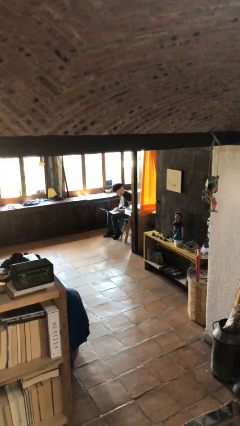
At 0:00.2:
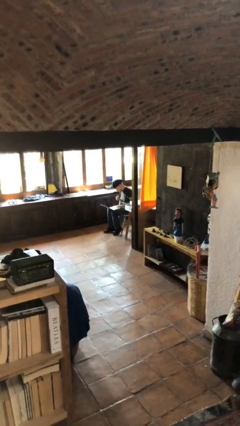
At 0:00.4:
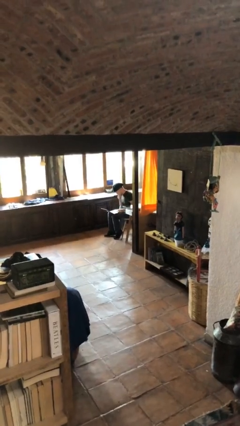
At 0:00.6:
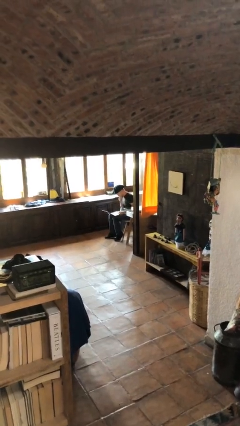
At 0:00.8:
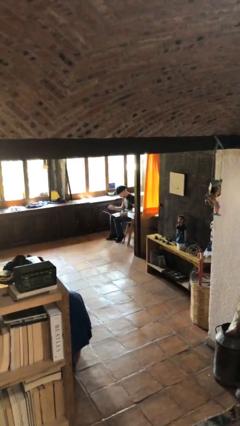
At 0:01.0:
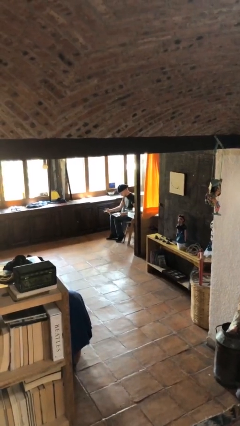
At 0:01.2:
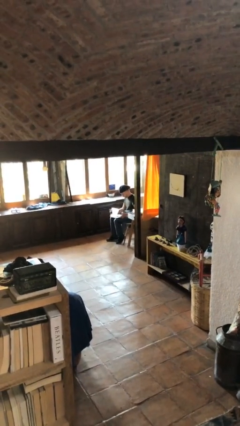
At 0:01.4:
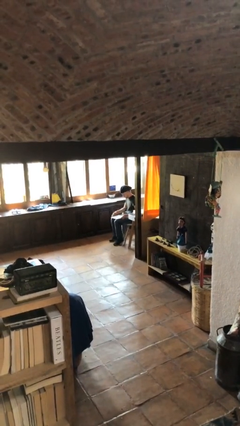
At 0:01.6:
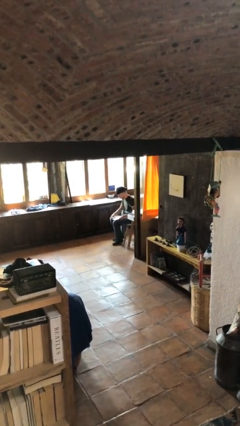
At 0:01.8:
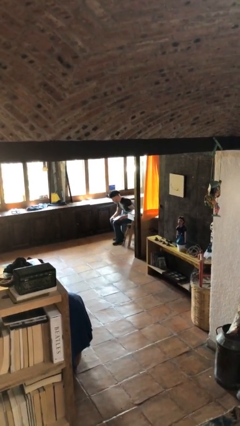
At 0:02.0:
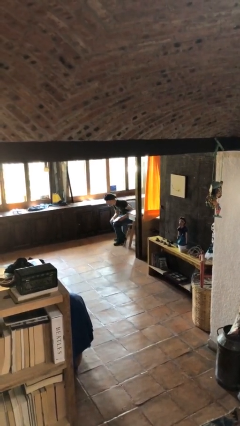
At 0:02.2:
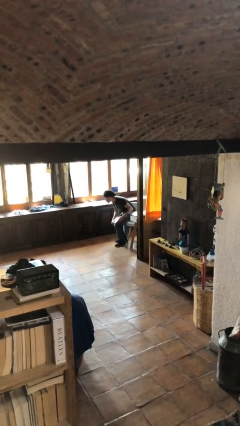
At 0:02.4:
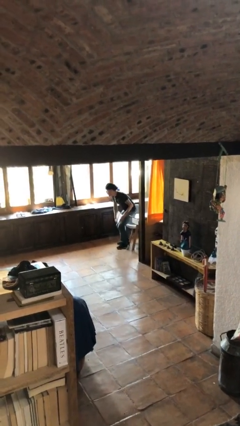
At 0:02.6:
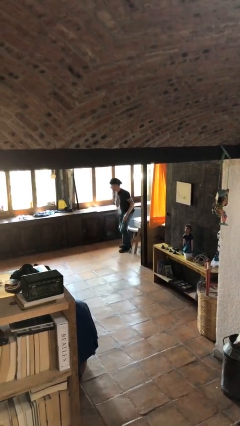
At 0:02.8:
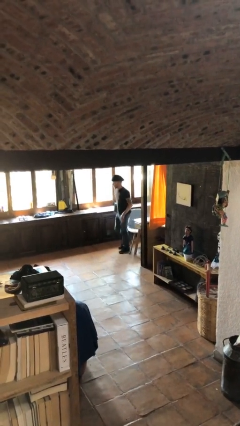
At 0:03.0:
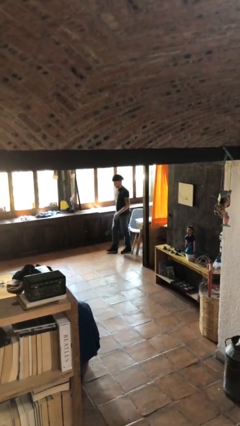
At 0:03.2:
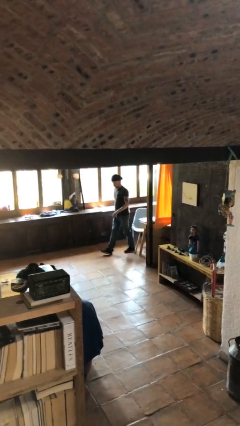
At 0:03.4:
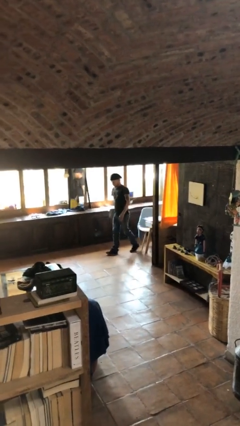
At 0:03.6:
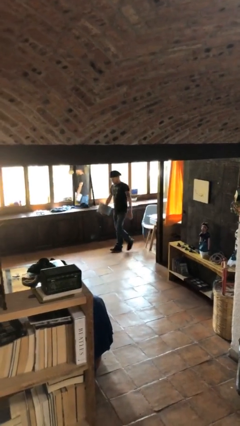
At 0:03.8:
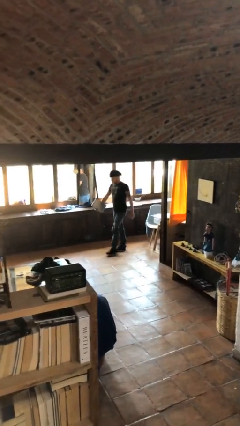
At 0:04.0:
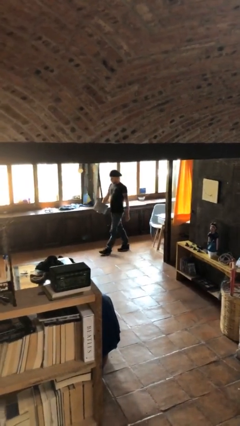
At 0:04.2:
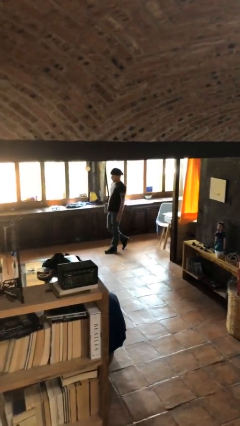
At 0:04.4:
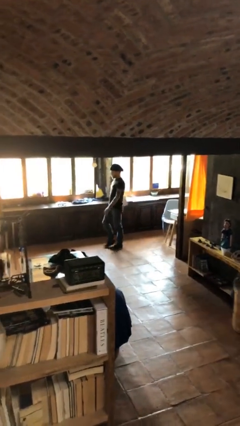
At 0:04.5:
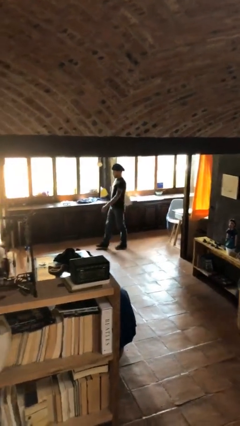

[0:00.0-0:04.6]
person stands up

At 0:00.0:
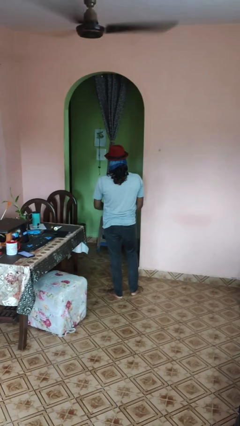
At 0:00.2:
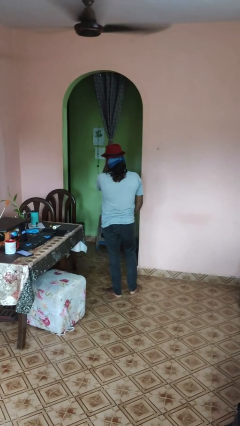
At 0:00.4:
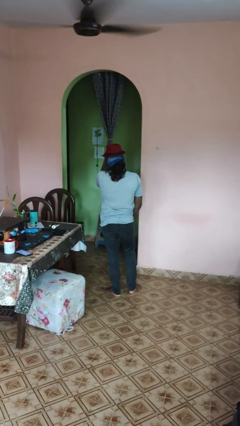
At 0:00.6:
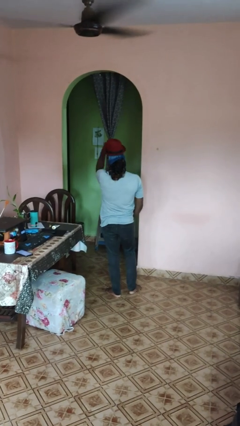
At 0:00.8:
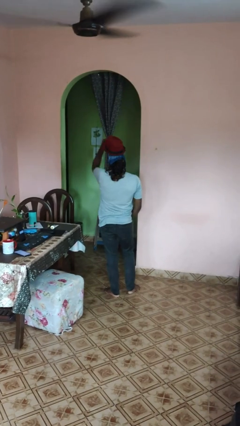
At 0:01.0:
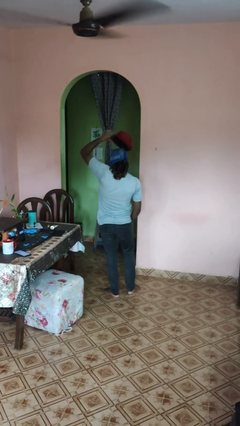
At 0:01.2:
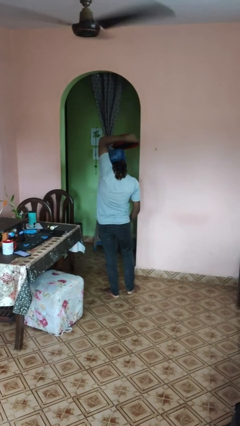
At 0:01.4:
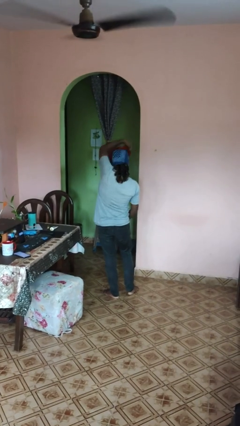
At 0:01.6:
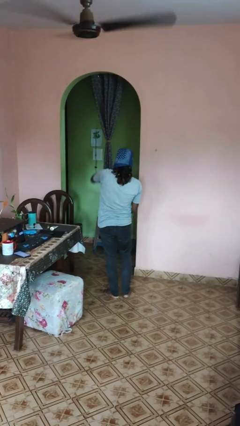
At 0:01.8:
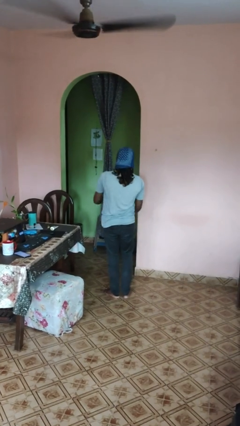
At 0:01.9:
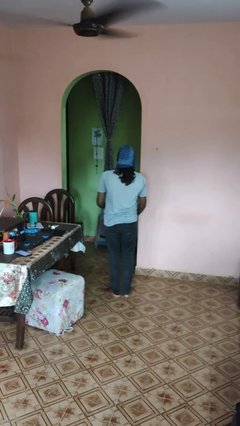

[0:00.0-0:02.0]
person takes off hat

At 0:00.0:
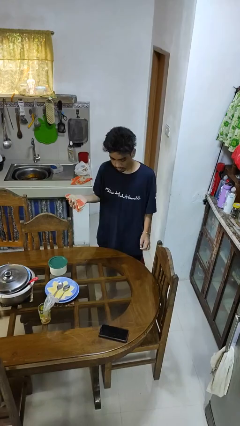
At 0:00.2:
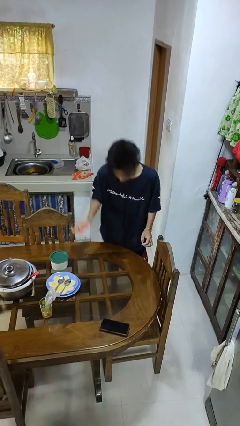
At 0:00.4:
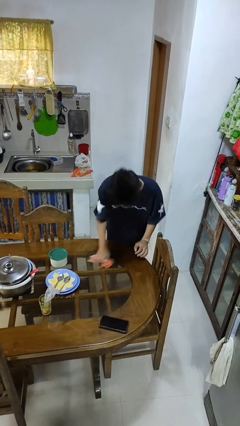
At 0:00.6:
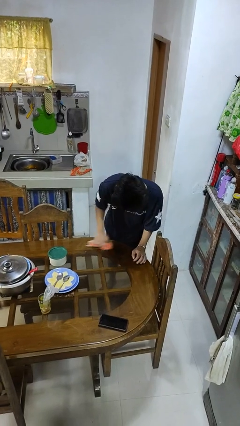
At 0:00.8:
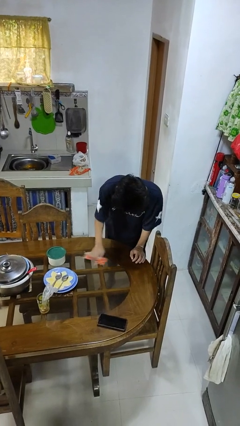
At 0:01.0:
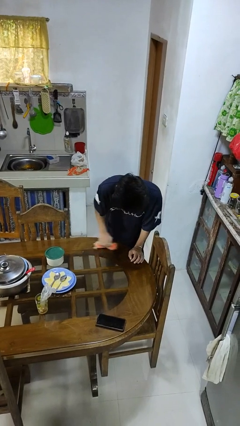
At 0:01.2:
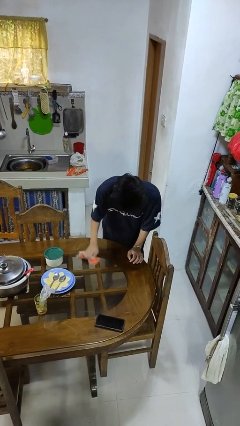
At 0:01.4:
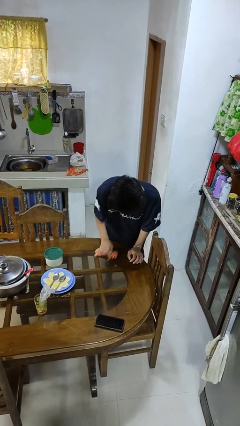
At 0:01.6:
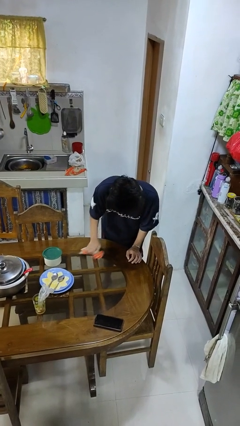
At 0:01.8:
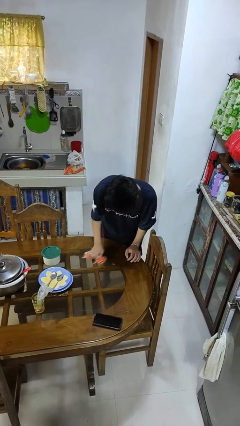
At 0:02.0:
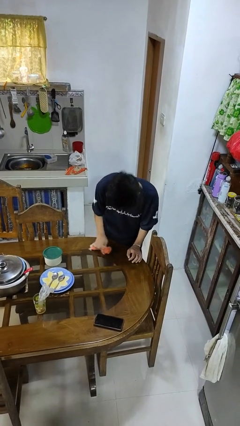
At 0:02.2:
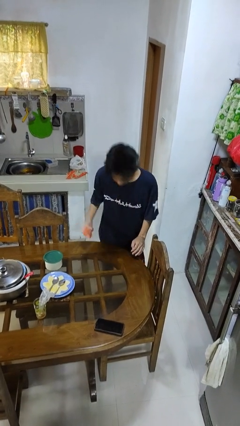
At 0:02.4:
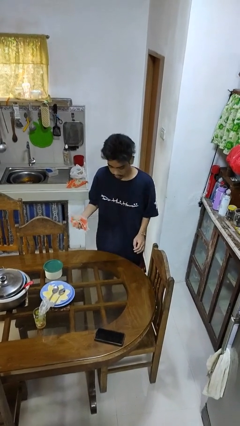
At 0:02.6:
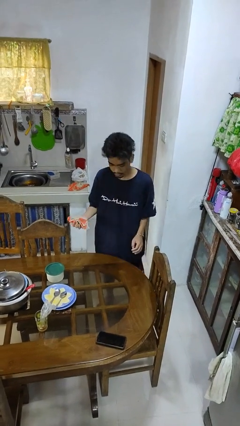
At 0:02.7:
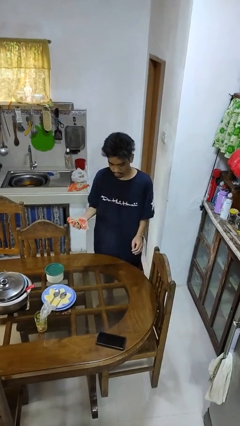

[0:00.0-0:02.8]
person cleans table with rag

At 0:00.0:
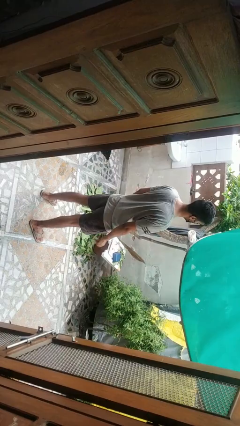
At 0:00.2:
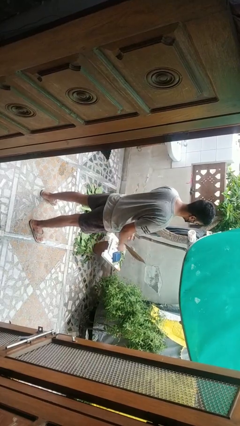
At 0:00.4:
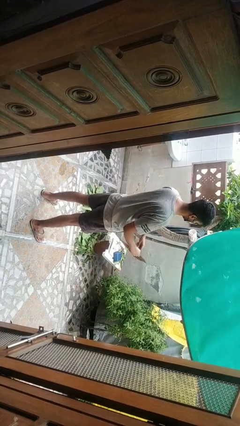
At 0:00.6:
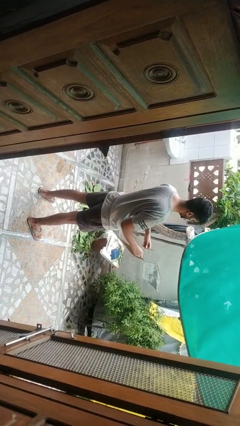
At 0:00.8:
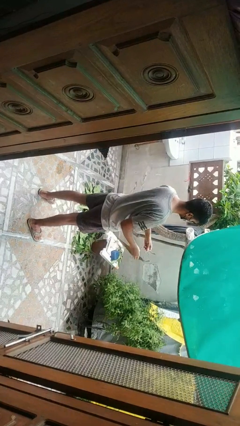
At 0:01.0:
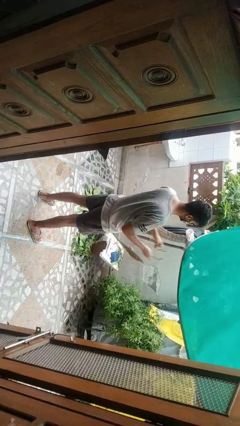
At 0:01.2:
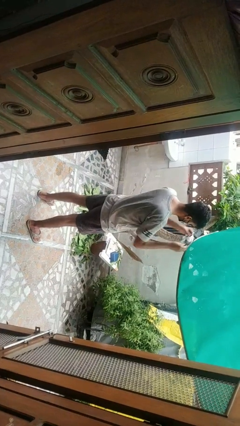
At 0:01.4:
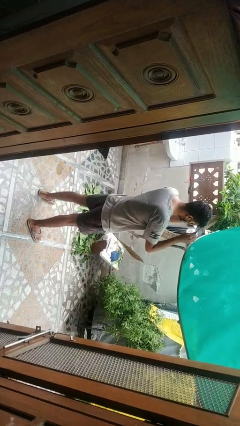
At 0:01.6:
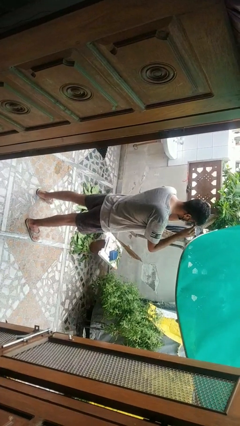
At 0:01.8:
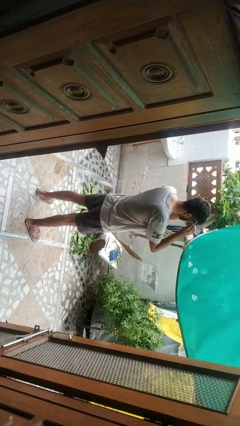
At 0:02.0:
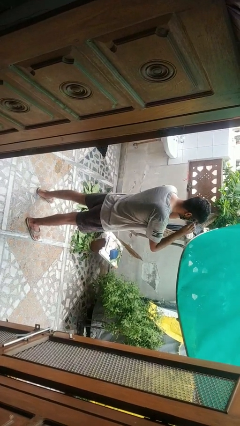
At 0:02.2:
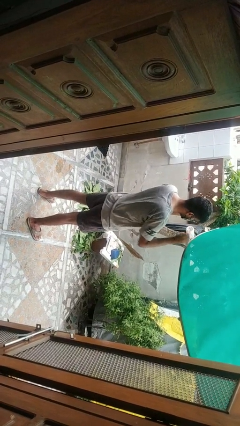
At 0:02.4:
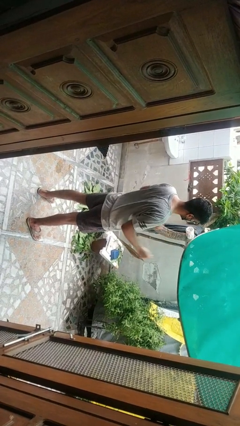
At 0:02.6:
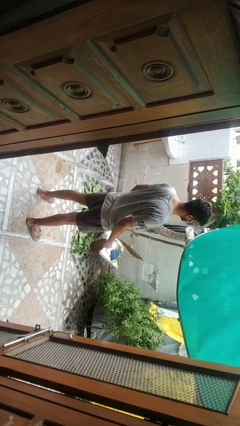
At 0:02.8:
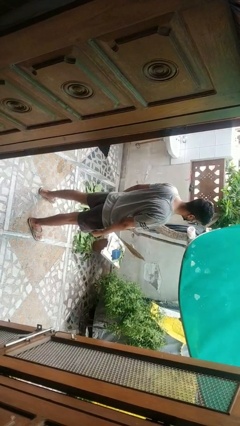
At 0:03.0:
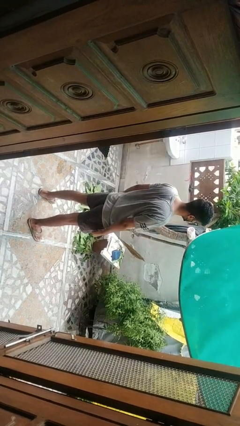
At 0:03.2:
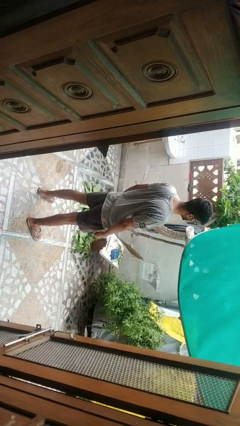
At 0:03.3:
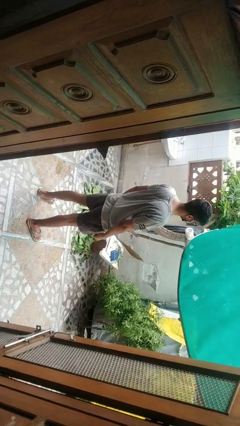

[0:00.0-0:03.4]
person puts on glasses

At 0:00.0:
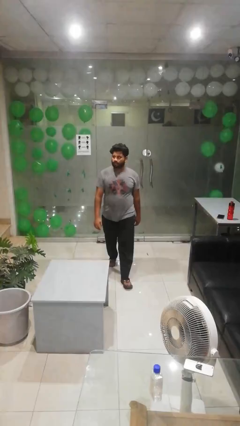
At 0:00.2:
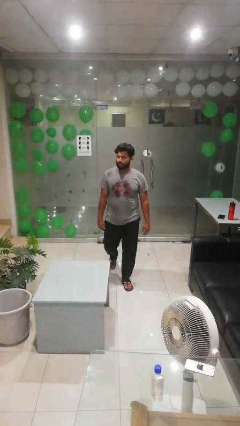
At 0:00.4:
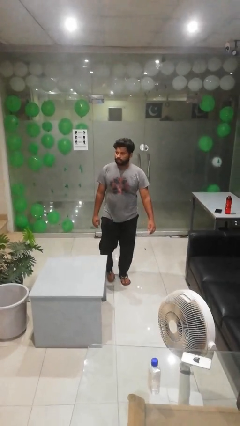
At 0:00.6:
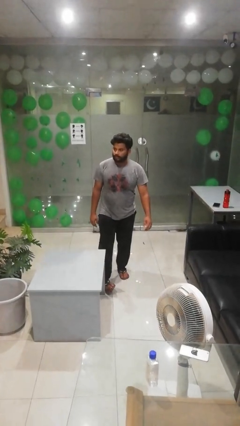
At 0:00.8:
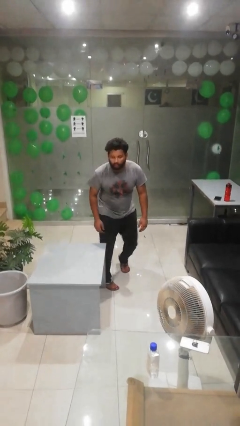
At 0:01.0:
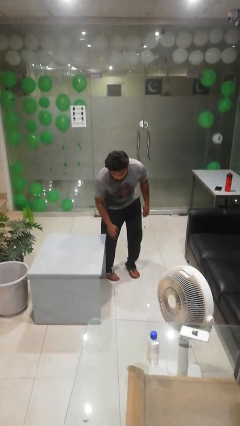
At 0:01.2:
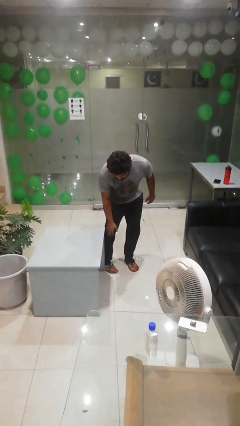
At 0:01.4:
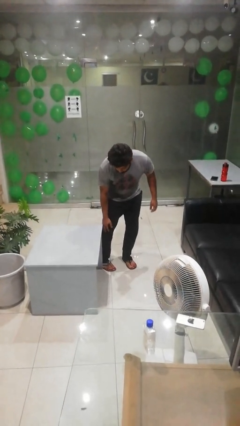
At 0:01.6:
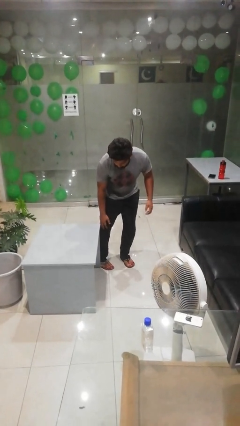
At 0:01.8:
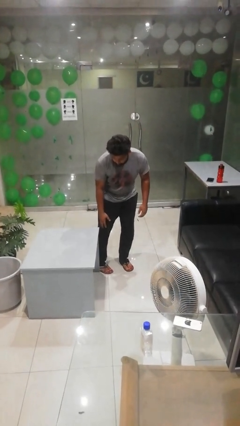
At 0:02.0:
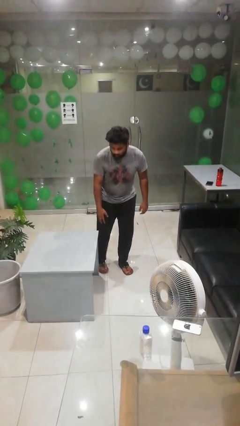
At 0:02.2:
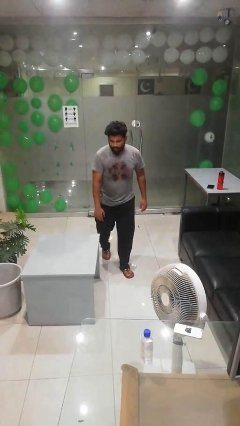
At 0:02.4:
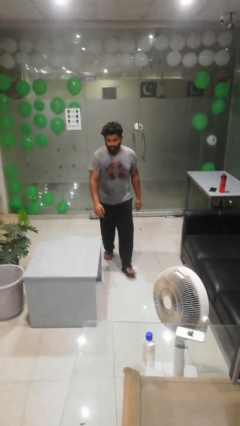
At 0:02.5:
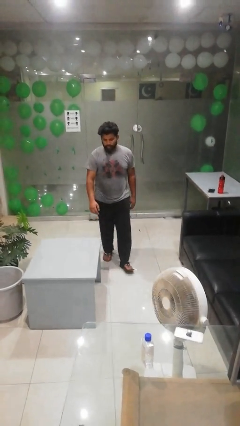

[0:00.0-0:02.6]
person bumps into table

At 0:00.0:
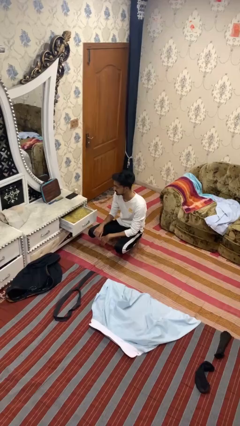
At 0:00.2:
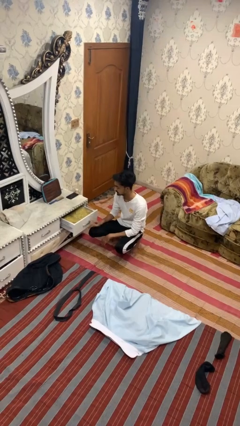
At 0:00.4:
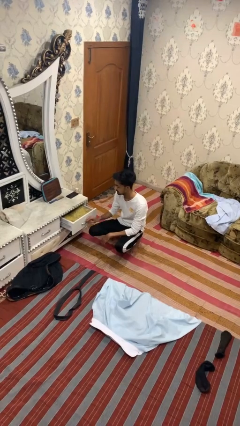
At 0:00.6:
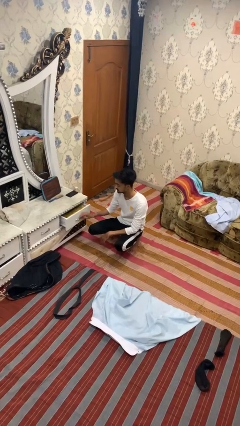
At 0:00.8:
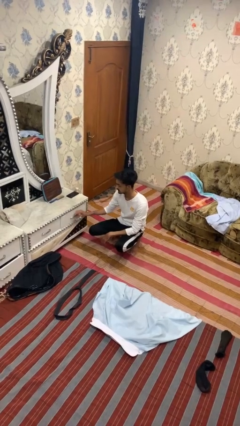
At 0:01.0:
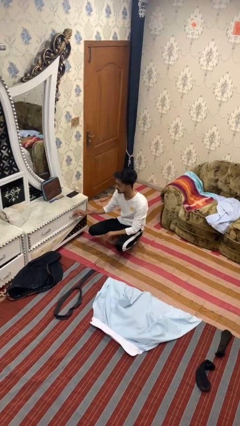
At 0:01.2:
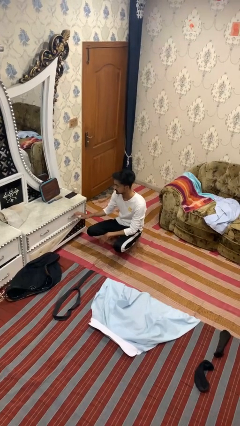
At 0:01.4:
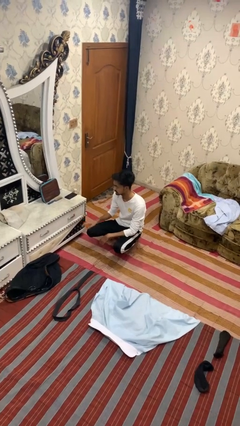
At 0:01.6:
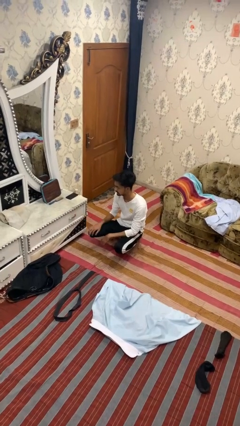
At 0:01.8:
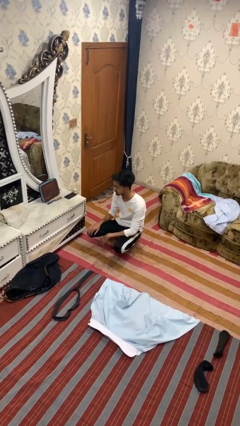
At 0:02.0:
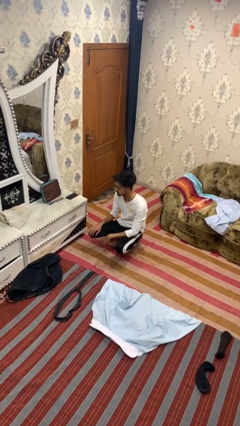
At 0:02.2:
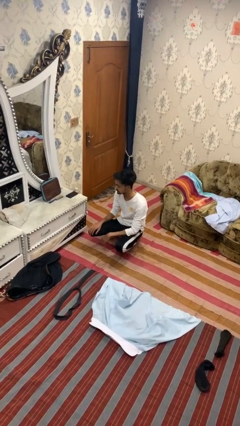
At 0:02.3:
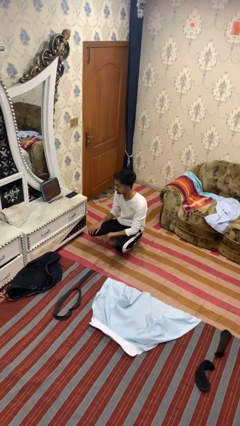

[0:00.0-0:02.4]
person closes dresser drawer
